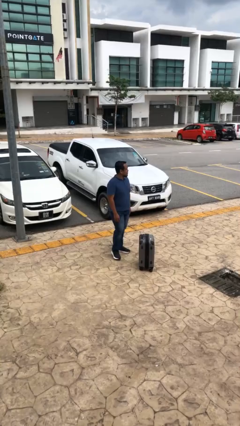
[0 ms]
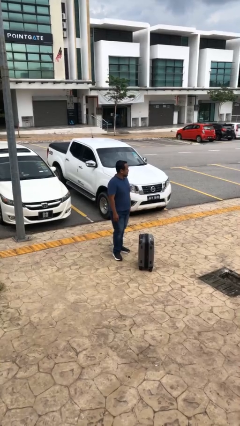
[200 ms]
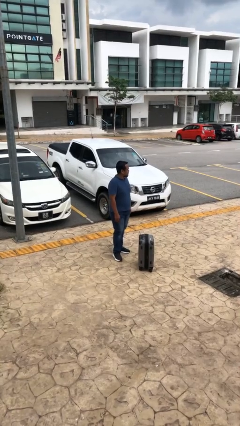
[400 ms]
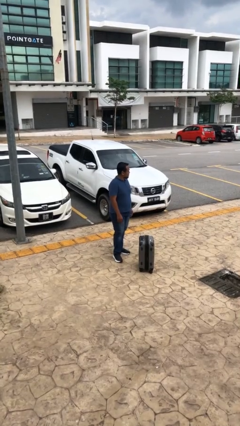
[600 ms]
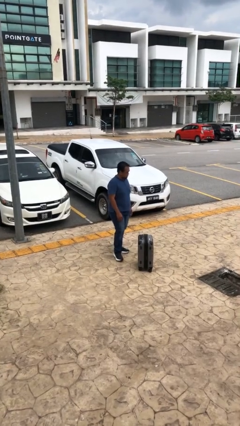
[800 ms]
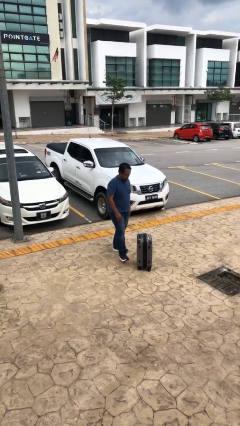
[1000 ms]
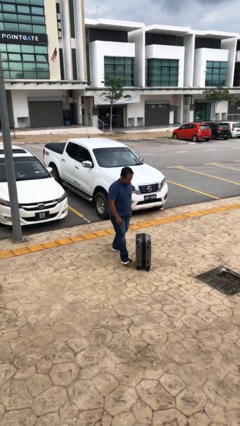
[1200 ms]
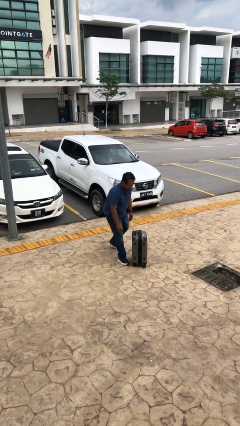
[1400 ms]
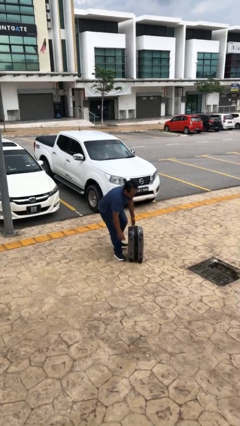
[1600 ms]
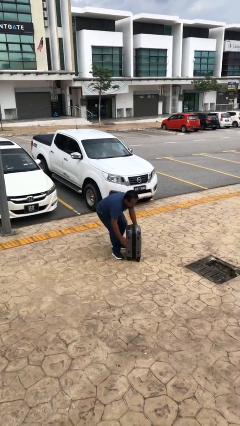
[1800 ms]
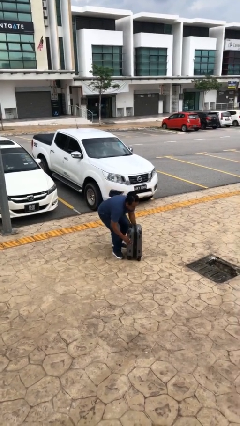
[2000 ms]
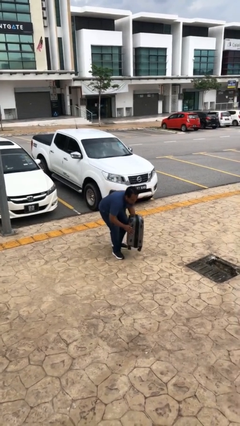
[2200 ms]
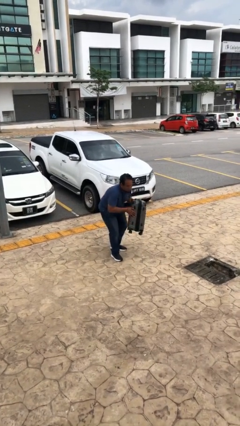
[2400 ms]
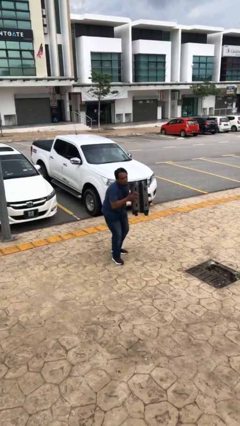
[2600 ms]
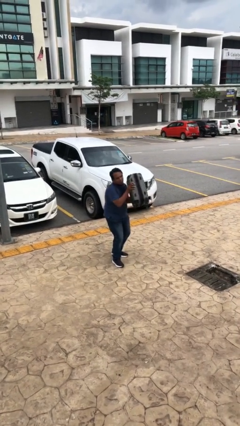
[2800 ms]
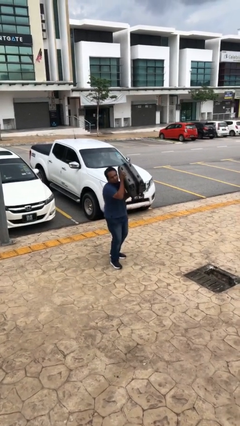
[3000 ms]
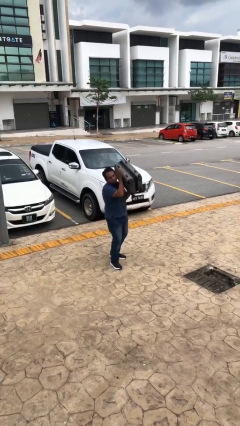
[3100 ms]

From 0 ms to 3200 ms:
person picks up object from floor

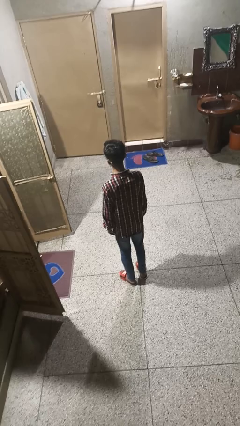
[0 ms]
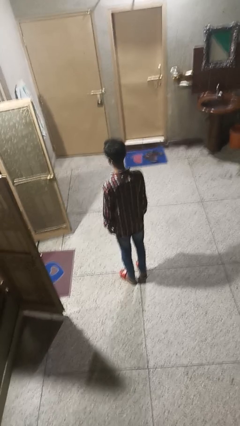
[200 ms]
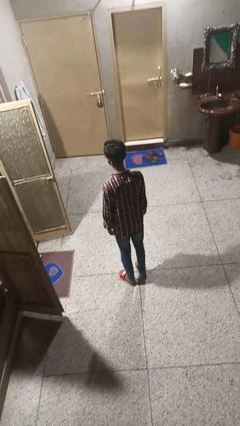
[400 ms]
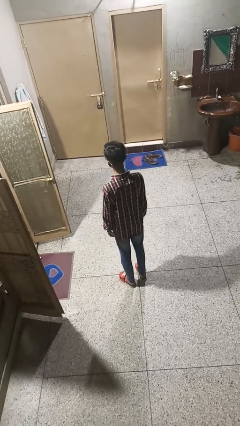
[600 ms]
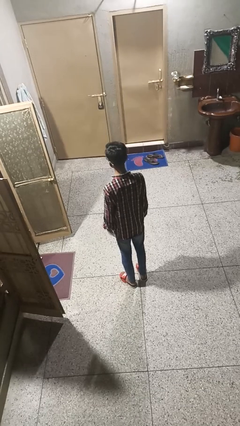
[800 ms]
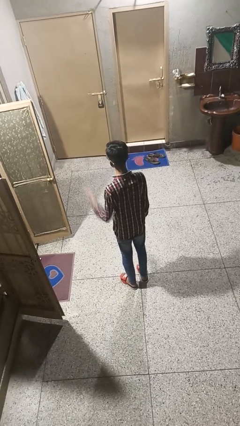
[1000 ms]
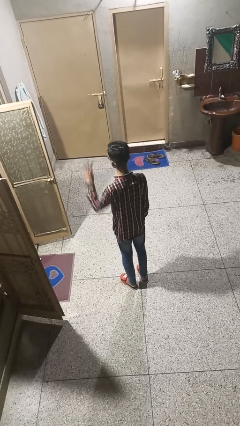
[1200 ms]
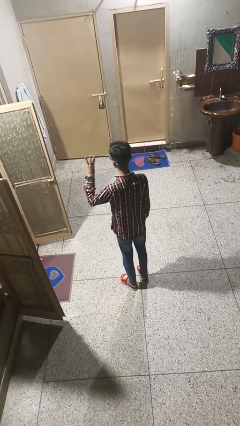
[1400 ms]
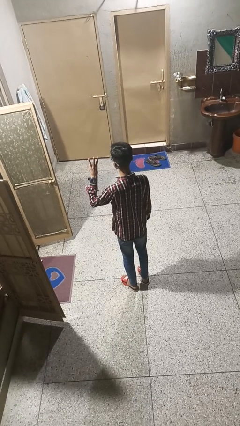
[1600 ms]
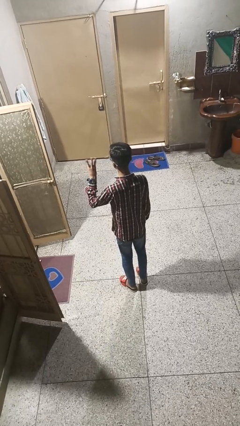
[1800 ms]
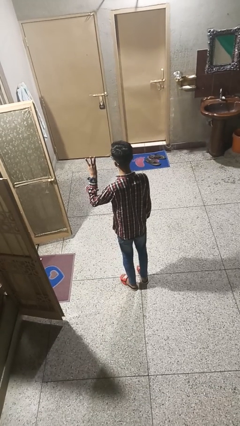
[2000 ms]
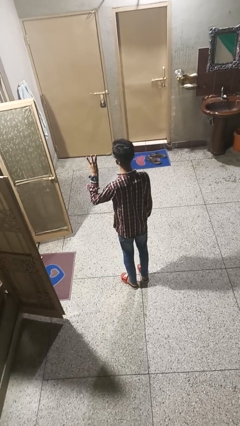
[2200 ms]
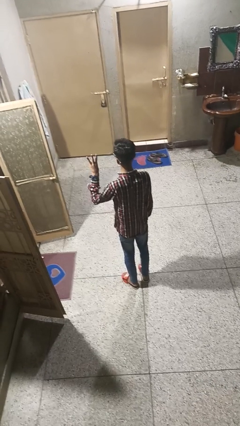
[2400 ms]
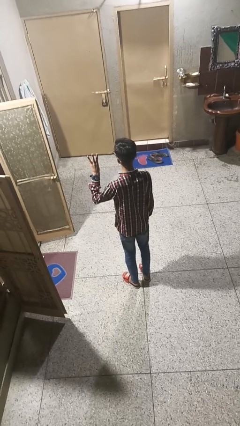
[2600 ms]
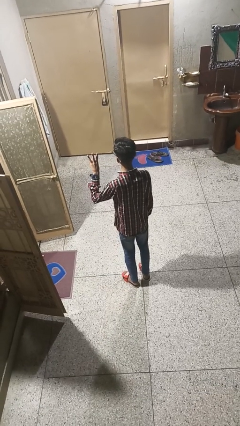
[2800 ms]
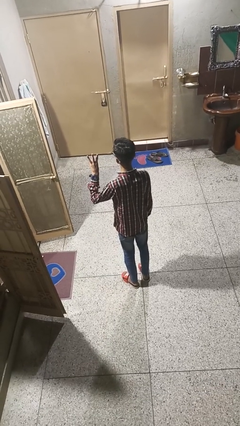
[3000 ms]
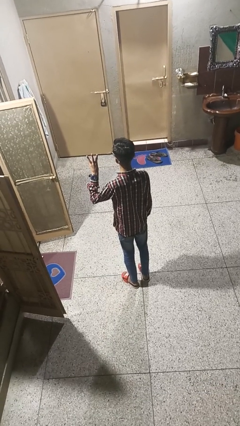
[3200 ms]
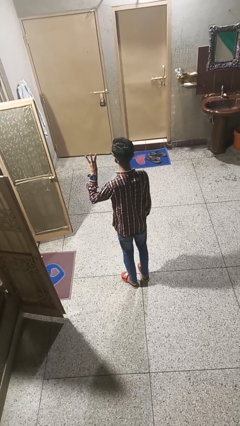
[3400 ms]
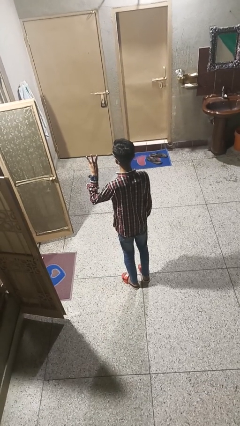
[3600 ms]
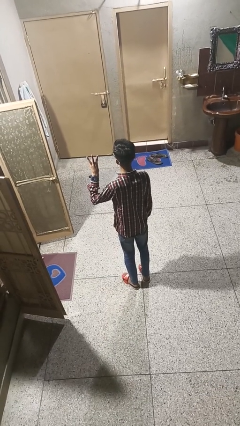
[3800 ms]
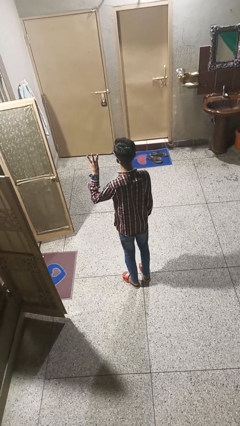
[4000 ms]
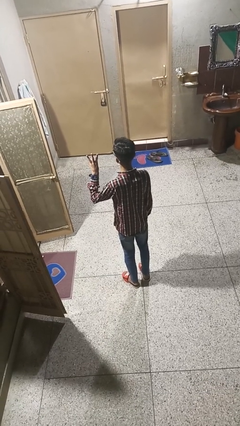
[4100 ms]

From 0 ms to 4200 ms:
person gestures number three

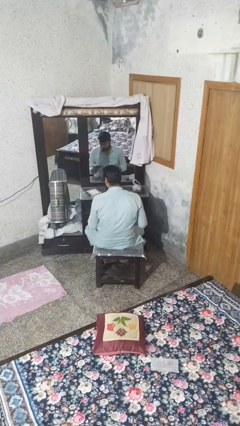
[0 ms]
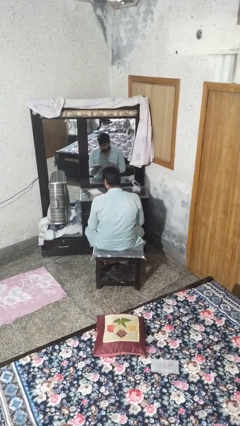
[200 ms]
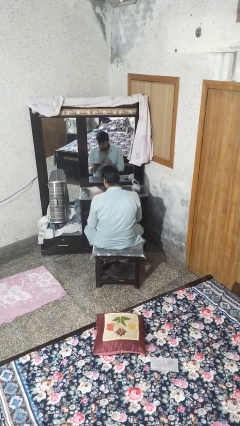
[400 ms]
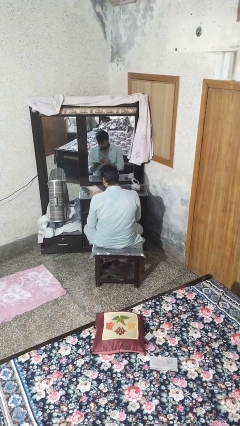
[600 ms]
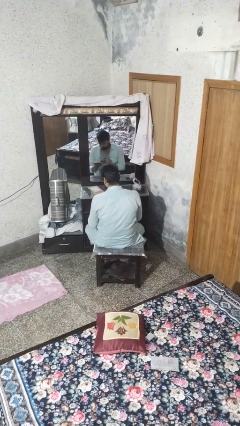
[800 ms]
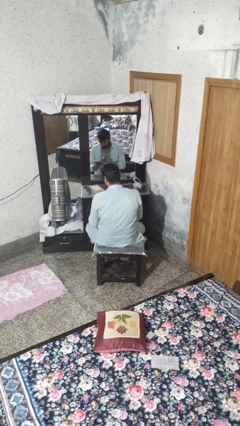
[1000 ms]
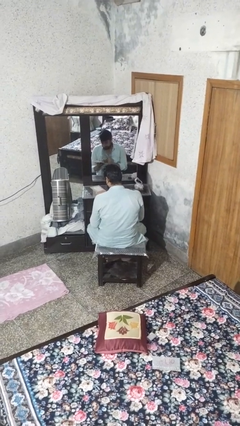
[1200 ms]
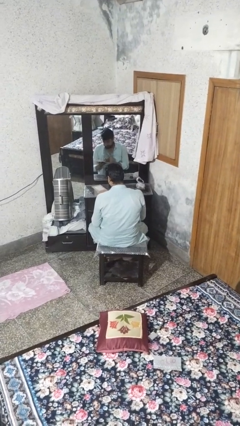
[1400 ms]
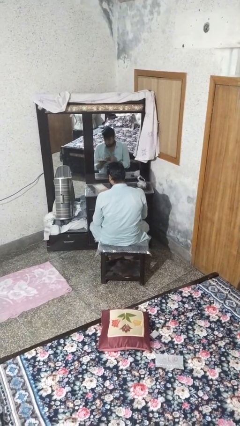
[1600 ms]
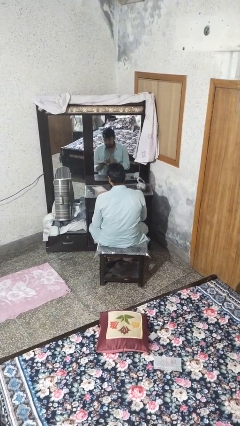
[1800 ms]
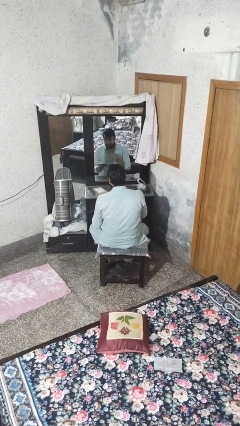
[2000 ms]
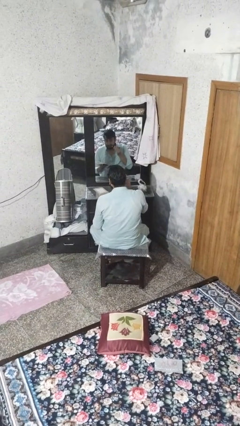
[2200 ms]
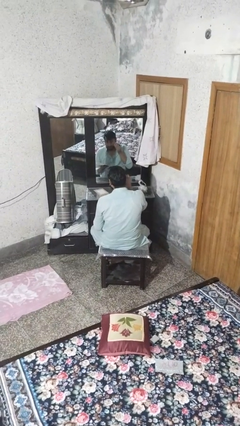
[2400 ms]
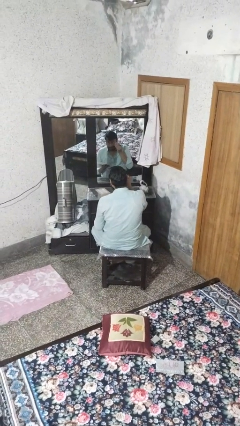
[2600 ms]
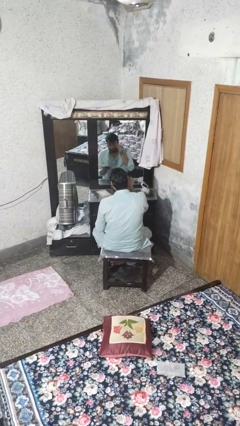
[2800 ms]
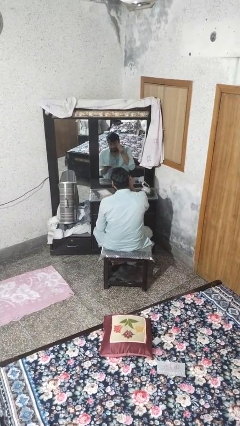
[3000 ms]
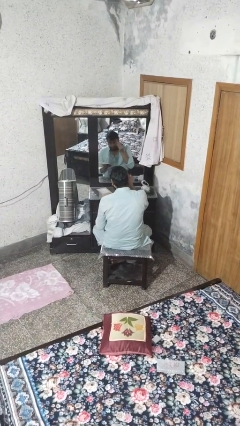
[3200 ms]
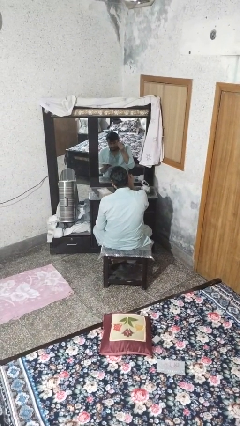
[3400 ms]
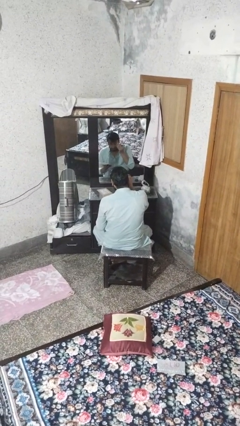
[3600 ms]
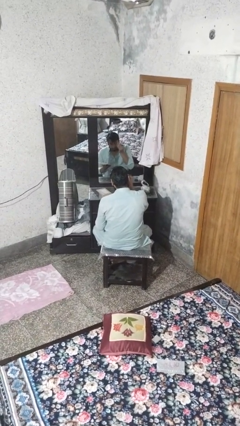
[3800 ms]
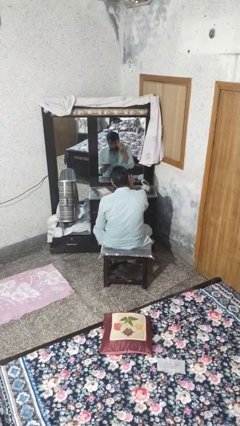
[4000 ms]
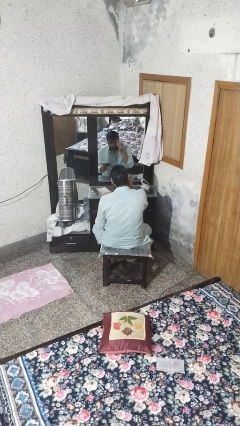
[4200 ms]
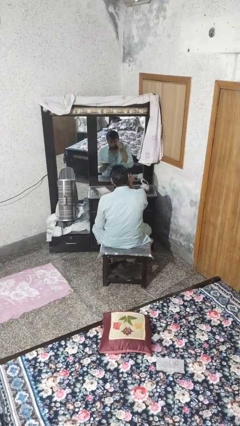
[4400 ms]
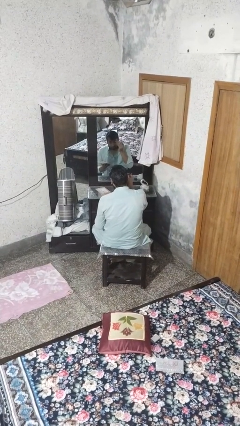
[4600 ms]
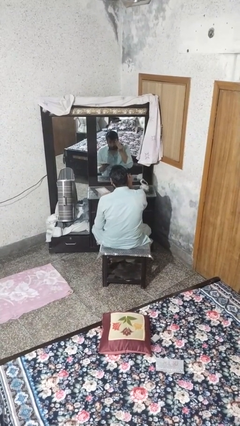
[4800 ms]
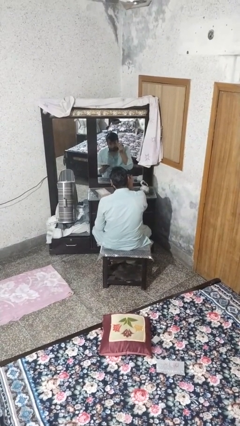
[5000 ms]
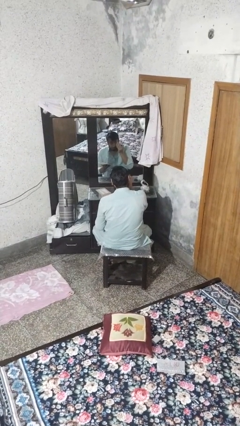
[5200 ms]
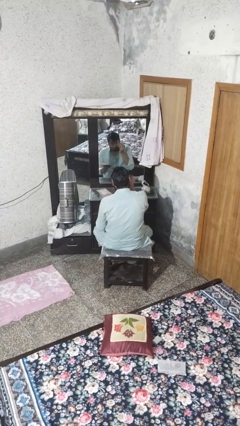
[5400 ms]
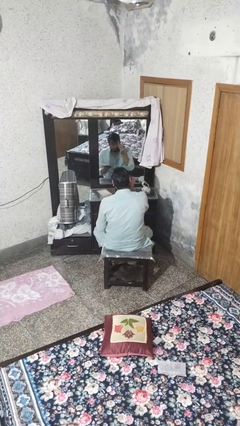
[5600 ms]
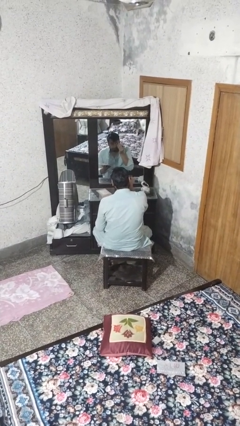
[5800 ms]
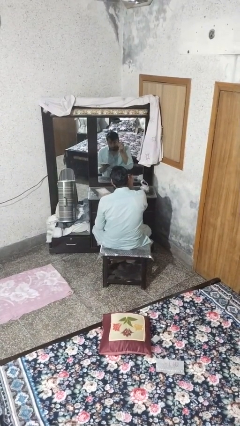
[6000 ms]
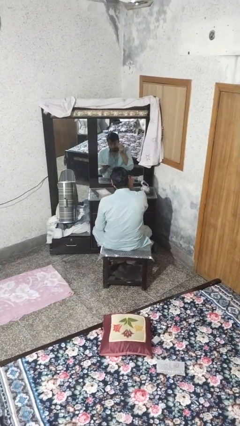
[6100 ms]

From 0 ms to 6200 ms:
person applies eye makeup

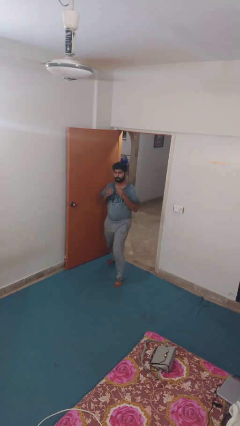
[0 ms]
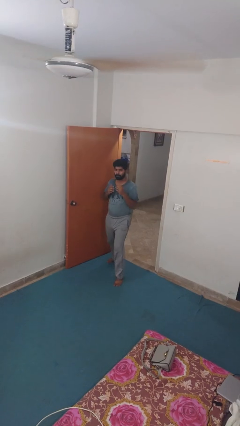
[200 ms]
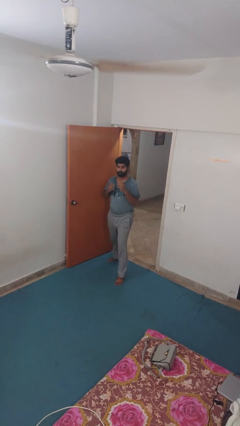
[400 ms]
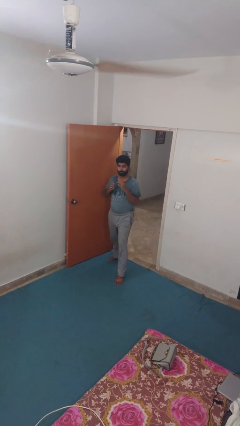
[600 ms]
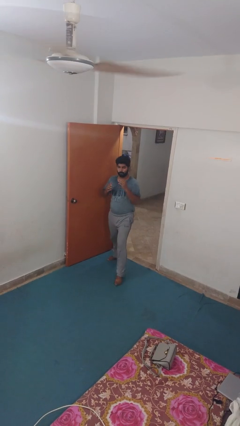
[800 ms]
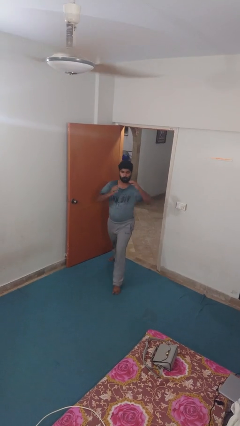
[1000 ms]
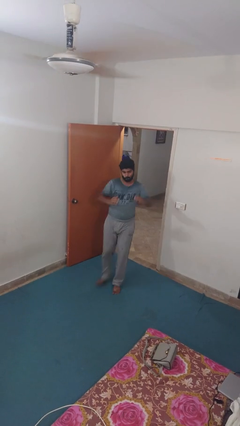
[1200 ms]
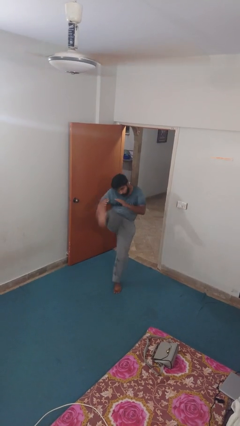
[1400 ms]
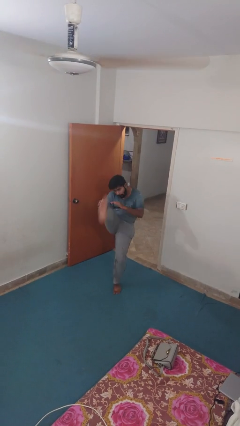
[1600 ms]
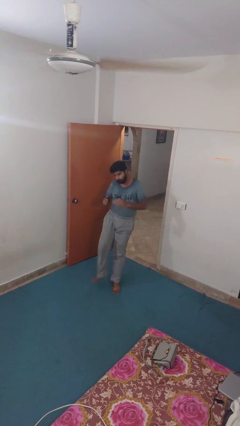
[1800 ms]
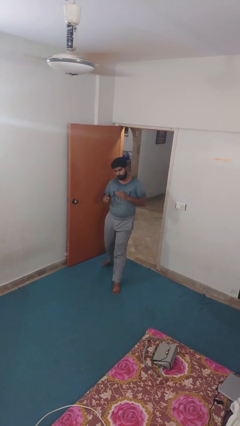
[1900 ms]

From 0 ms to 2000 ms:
person karate kicks

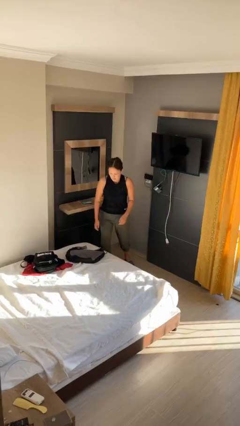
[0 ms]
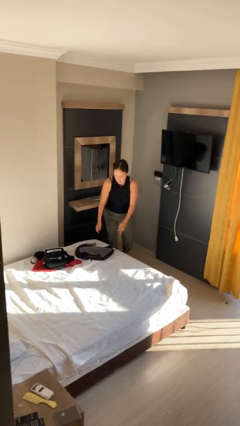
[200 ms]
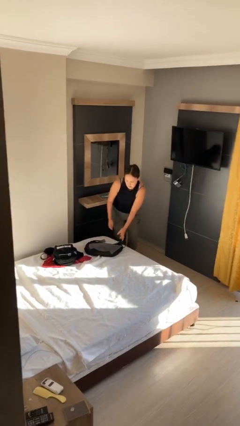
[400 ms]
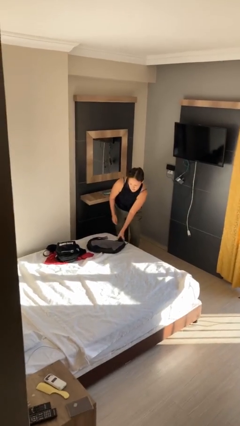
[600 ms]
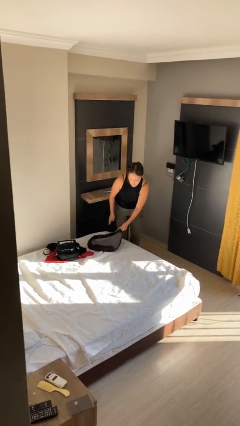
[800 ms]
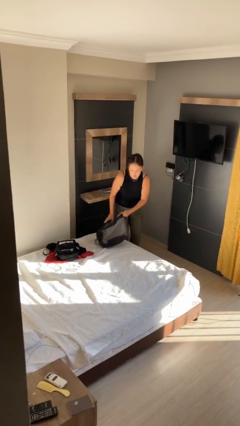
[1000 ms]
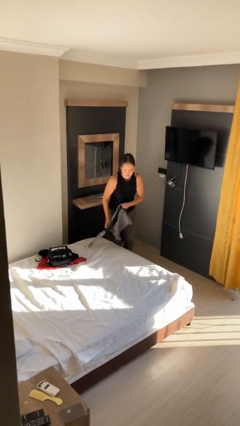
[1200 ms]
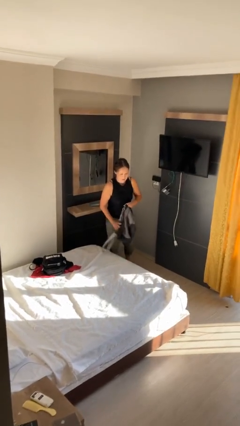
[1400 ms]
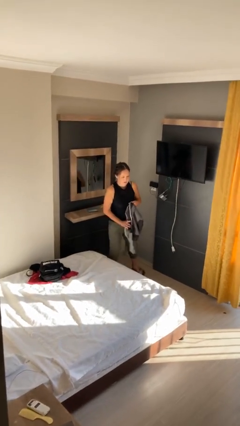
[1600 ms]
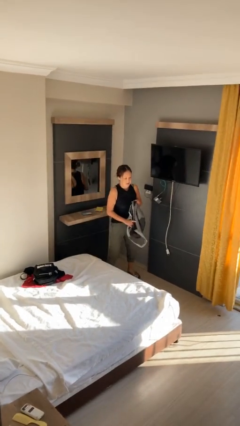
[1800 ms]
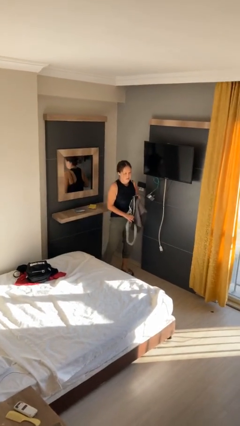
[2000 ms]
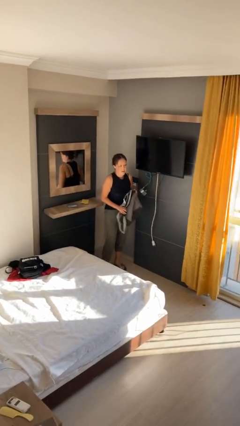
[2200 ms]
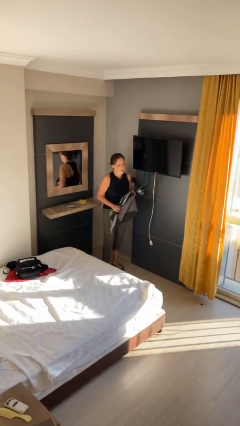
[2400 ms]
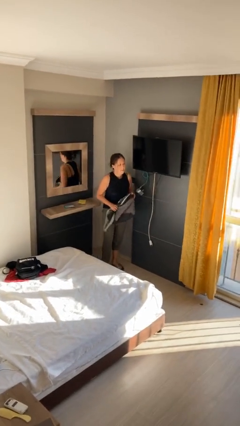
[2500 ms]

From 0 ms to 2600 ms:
person picks up object from bed
